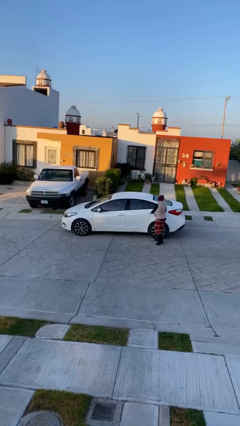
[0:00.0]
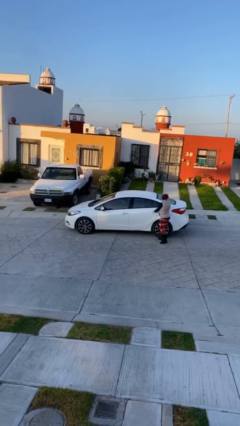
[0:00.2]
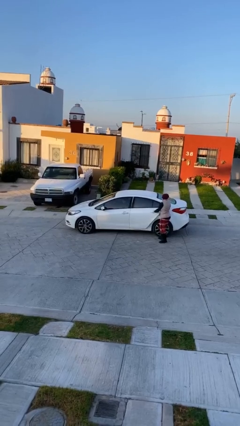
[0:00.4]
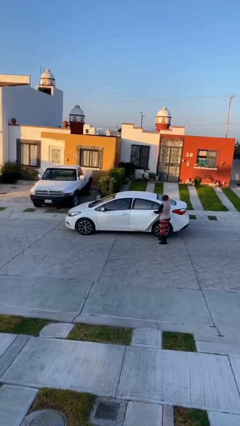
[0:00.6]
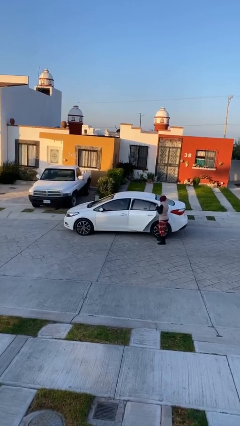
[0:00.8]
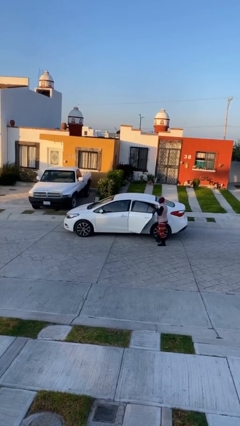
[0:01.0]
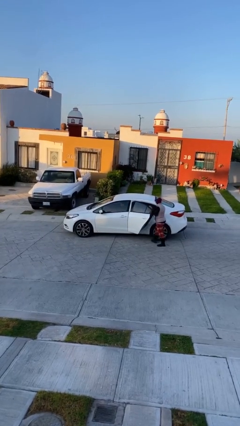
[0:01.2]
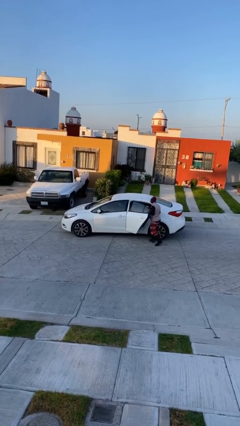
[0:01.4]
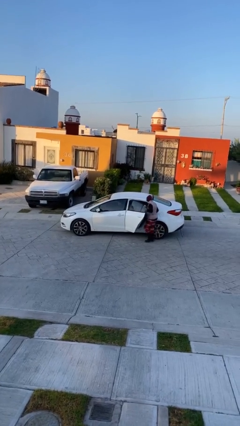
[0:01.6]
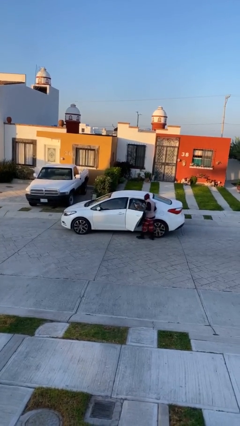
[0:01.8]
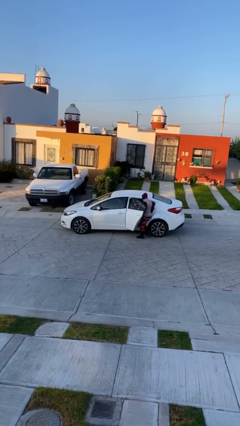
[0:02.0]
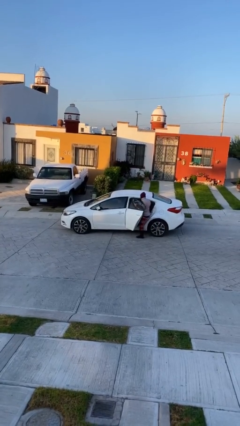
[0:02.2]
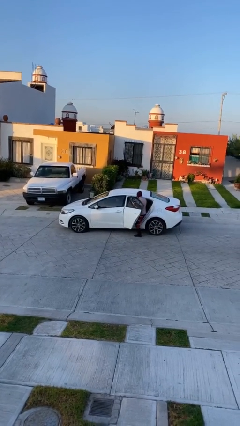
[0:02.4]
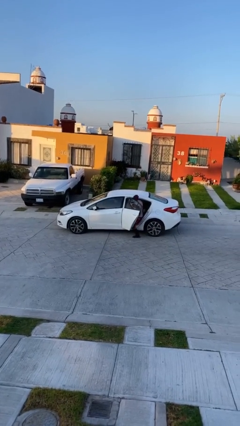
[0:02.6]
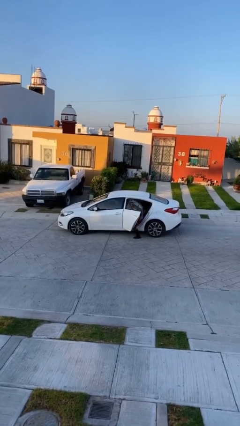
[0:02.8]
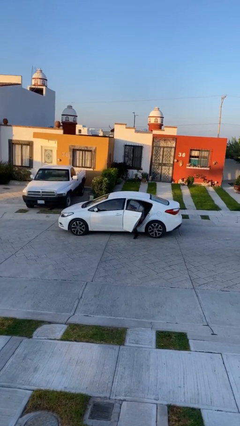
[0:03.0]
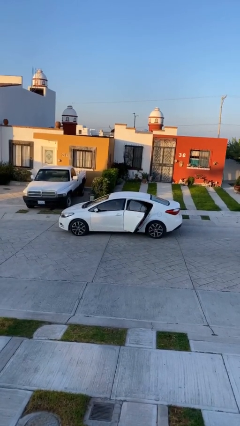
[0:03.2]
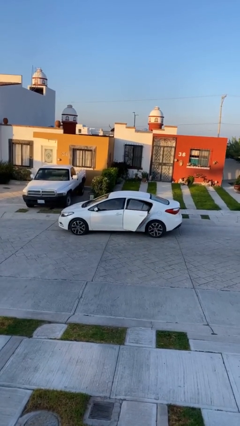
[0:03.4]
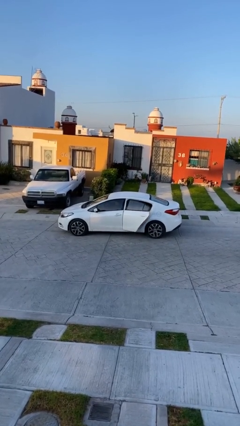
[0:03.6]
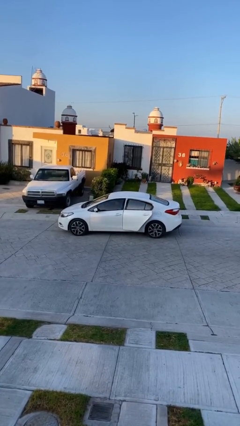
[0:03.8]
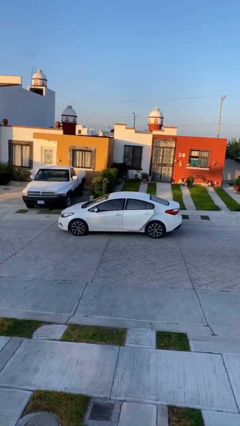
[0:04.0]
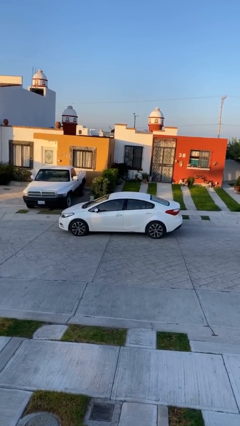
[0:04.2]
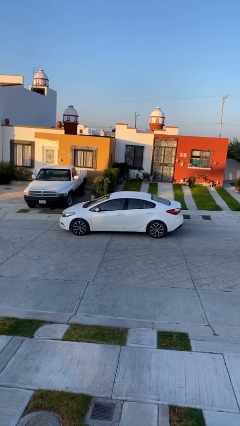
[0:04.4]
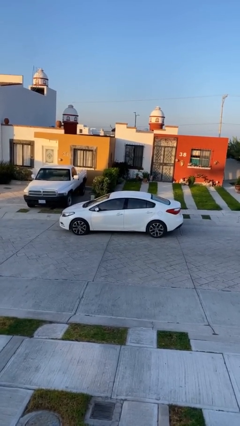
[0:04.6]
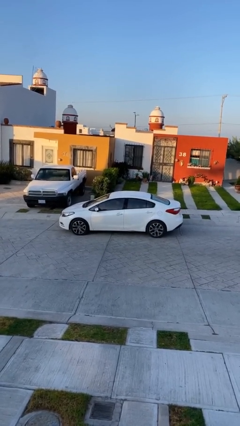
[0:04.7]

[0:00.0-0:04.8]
car picks up person

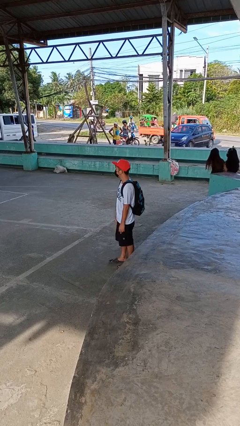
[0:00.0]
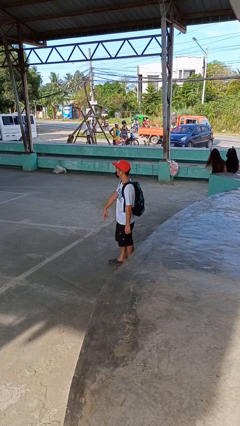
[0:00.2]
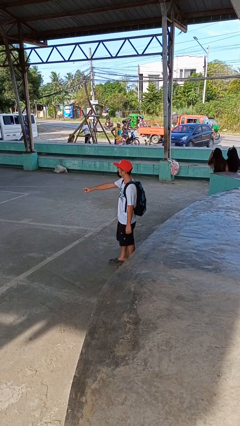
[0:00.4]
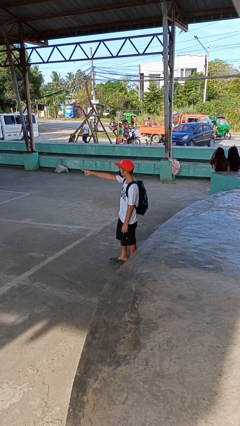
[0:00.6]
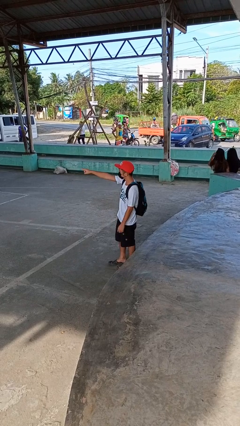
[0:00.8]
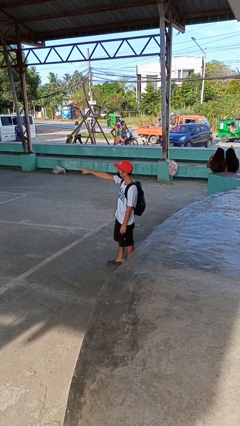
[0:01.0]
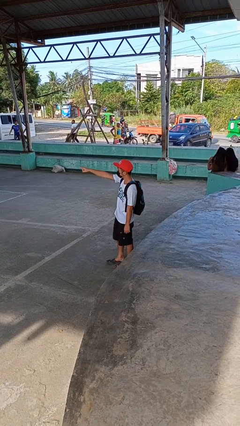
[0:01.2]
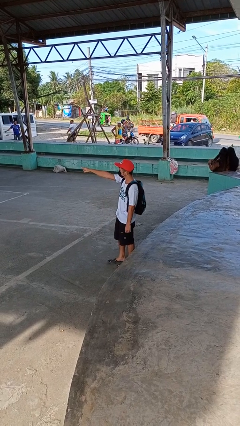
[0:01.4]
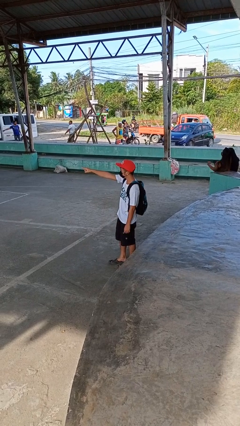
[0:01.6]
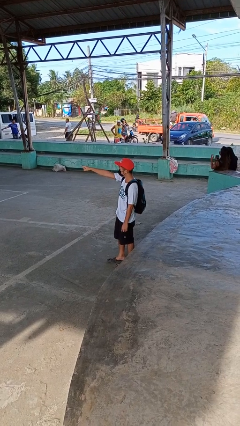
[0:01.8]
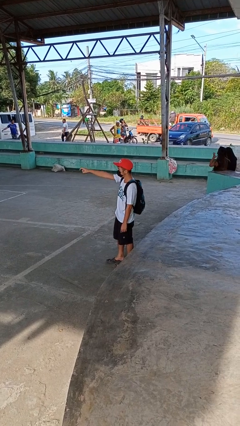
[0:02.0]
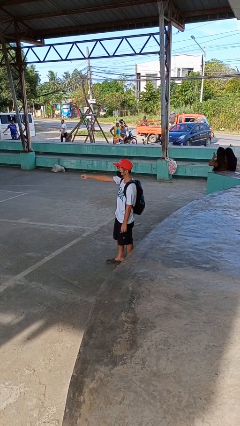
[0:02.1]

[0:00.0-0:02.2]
person points at person

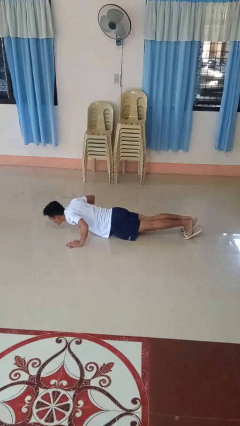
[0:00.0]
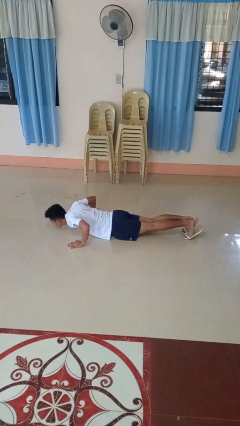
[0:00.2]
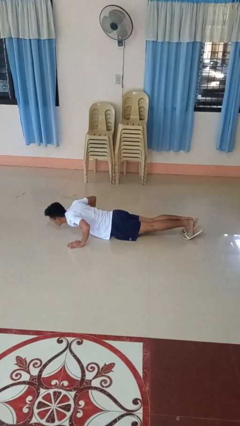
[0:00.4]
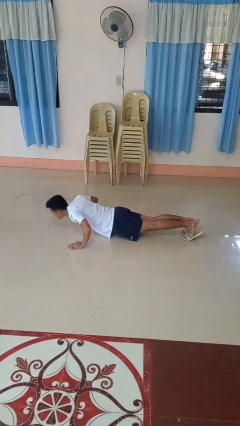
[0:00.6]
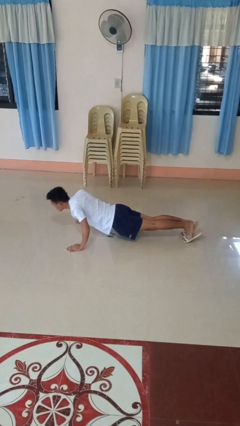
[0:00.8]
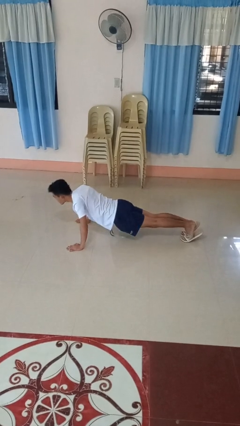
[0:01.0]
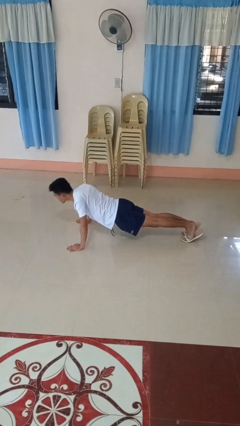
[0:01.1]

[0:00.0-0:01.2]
person exercises with pushup

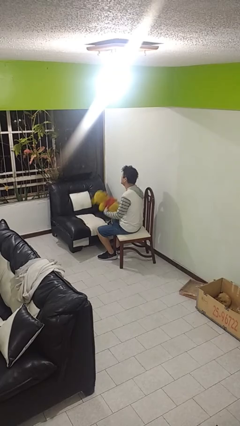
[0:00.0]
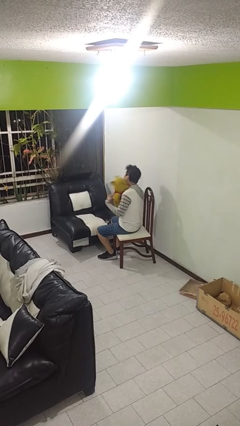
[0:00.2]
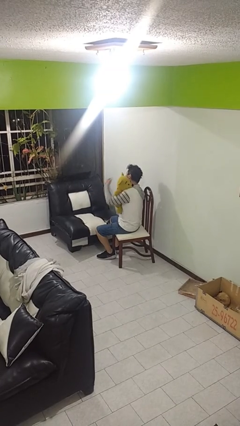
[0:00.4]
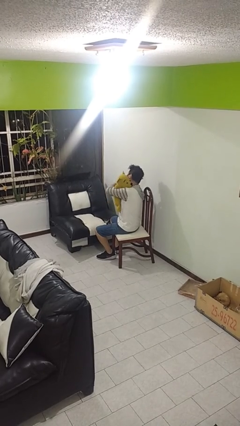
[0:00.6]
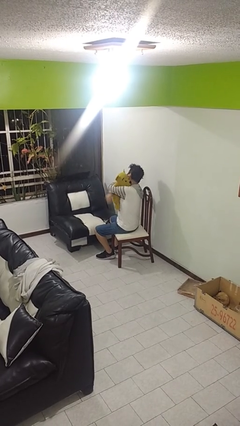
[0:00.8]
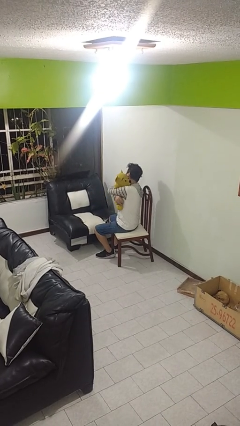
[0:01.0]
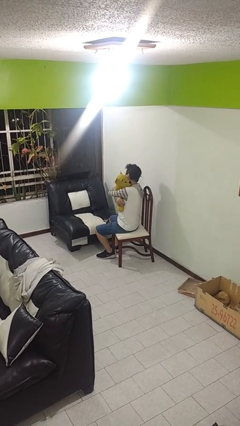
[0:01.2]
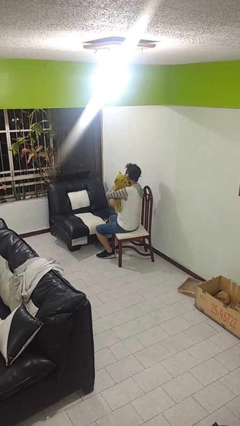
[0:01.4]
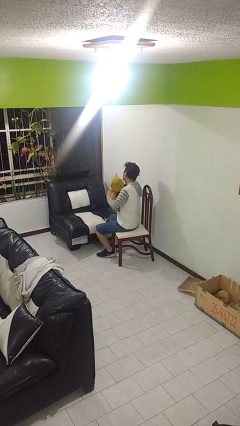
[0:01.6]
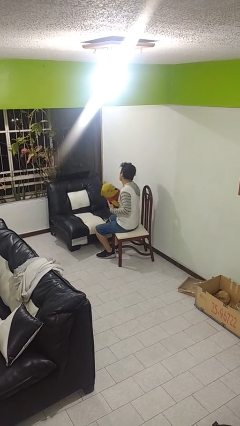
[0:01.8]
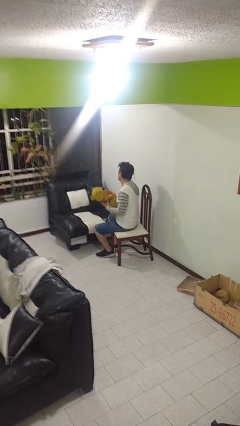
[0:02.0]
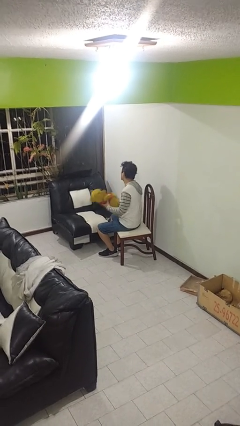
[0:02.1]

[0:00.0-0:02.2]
person hugs stuffed animal

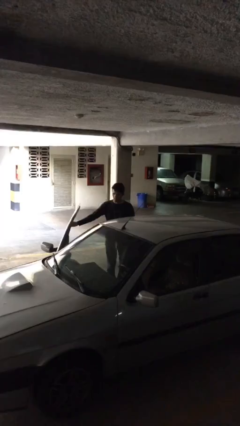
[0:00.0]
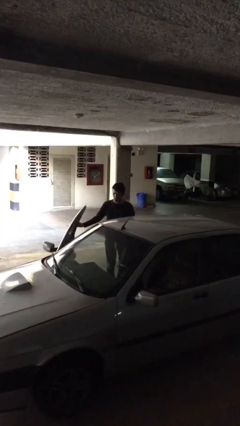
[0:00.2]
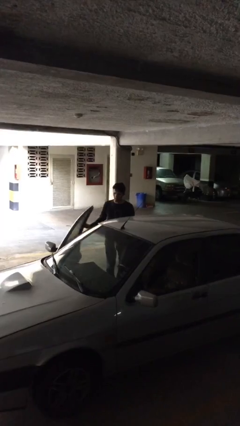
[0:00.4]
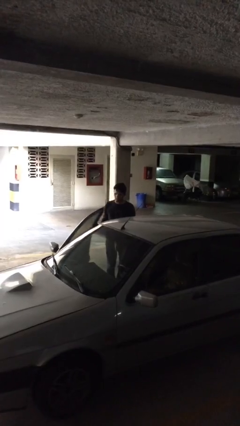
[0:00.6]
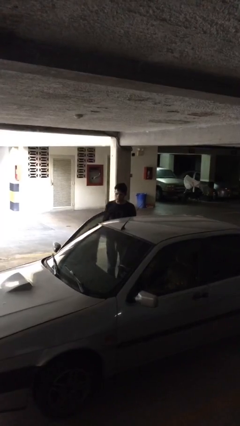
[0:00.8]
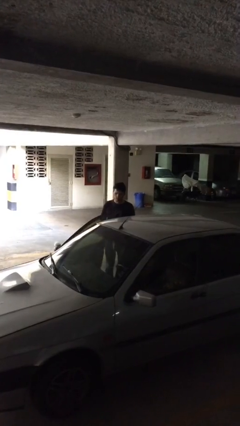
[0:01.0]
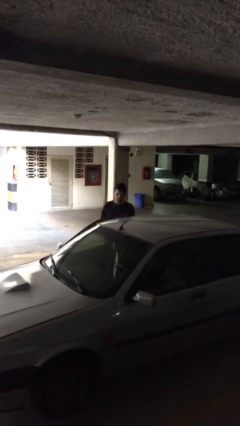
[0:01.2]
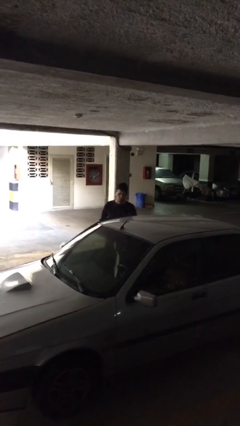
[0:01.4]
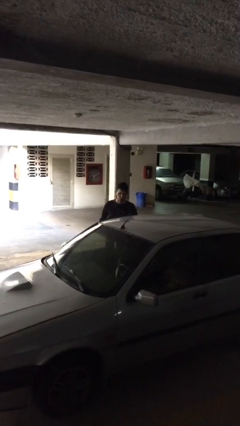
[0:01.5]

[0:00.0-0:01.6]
person closes car door

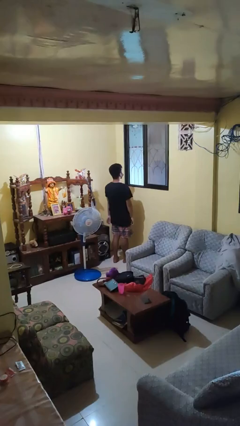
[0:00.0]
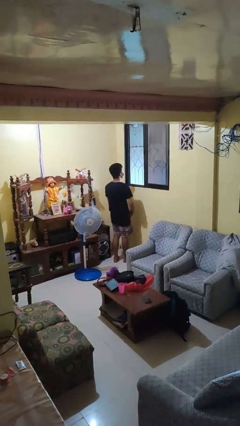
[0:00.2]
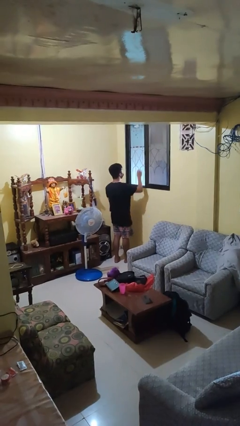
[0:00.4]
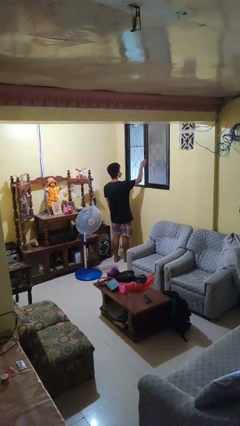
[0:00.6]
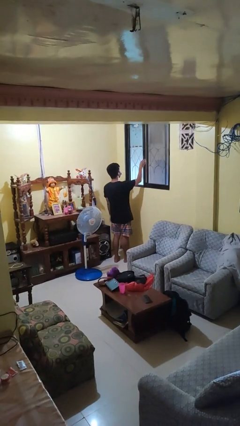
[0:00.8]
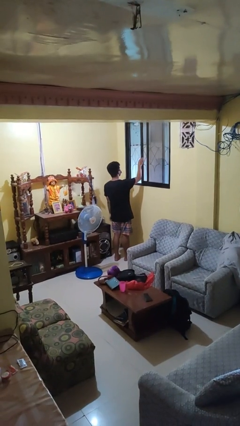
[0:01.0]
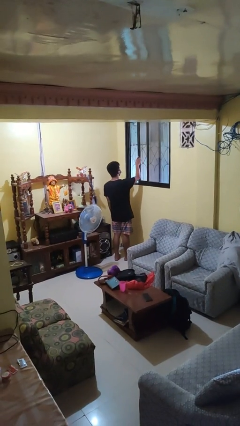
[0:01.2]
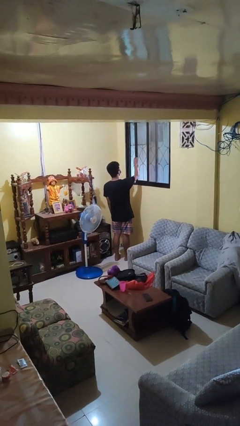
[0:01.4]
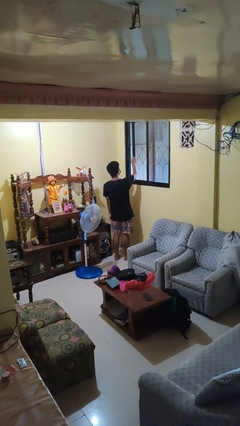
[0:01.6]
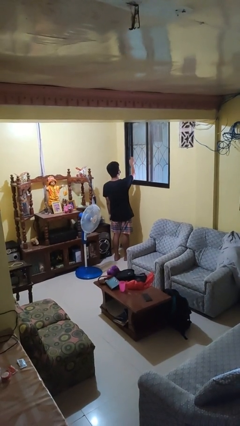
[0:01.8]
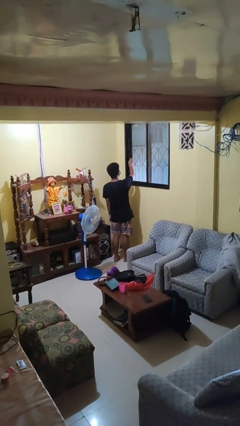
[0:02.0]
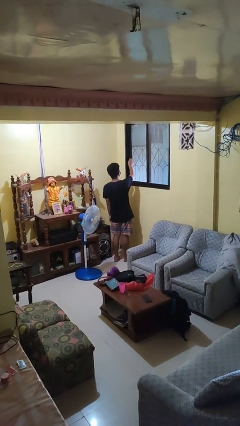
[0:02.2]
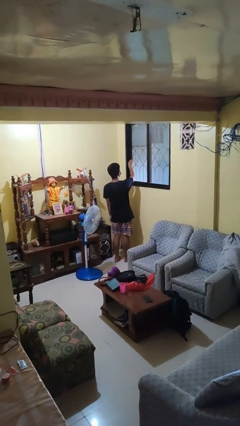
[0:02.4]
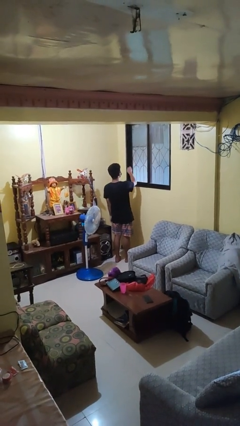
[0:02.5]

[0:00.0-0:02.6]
person closes home window

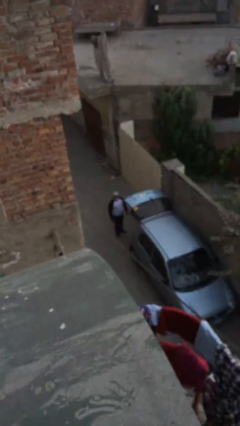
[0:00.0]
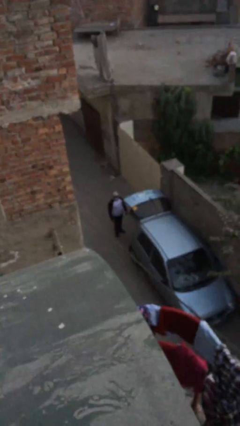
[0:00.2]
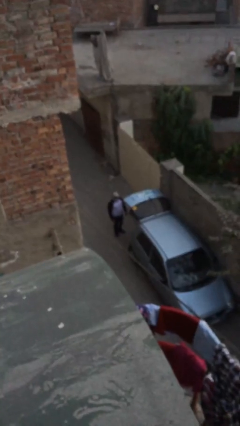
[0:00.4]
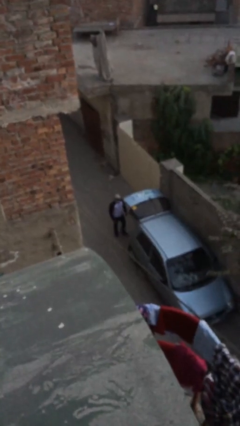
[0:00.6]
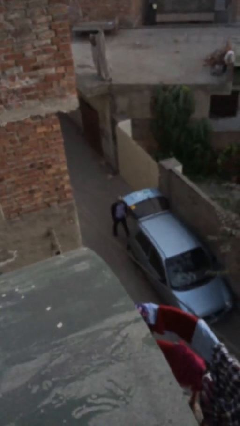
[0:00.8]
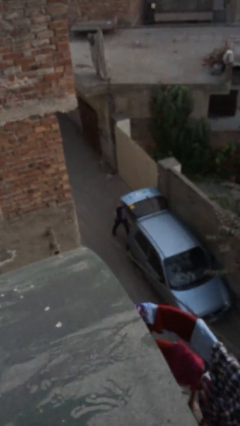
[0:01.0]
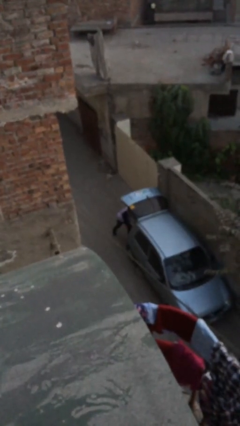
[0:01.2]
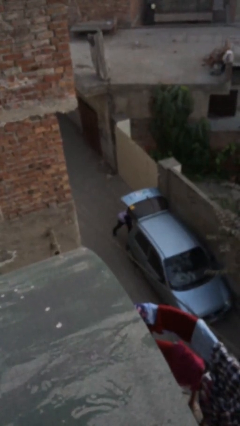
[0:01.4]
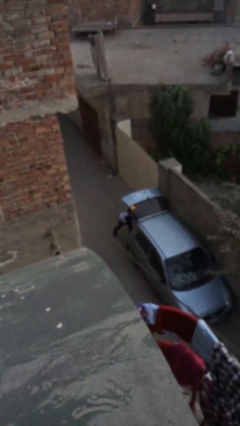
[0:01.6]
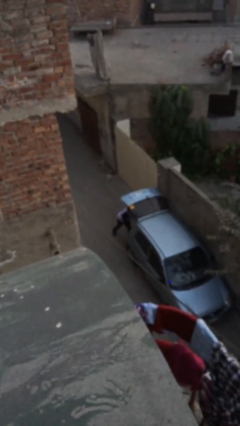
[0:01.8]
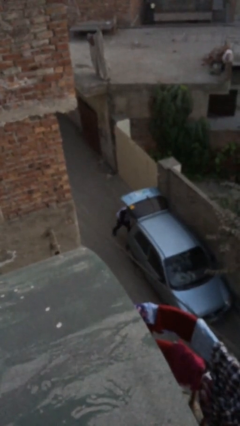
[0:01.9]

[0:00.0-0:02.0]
person unloads car

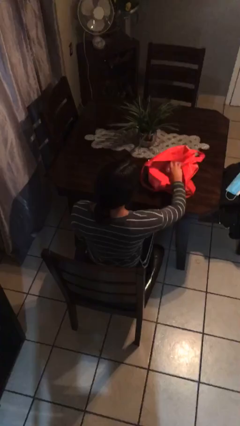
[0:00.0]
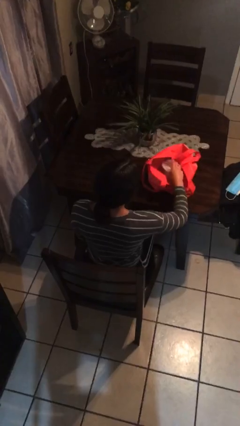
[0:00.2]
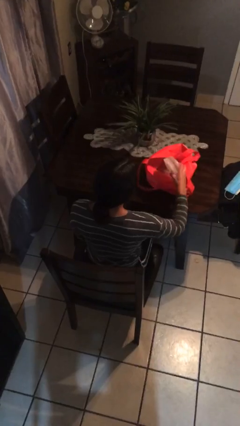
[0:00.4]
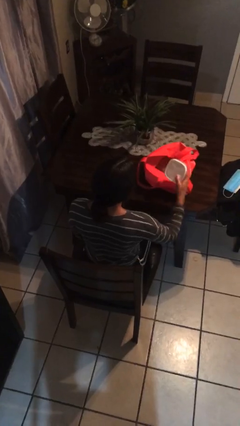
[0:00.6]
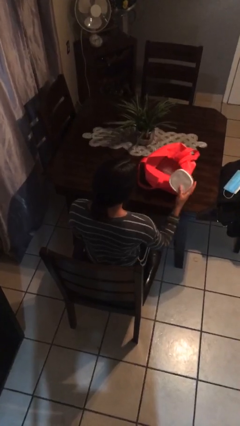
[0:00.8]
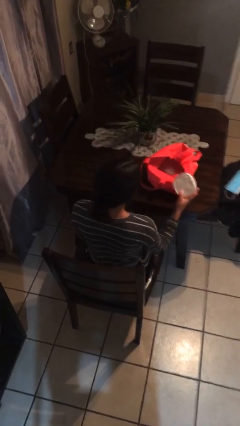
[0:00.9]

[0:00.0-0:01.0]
person takes object from bag
